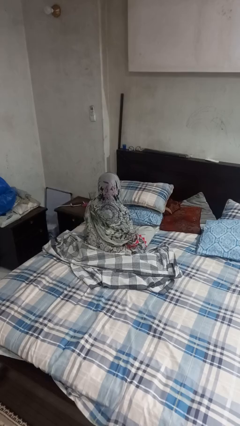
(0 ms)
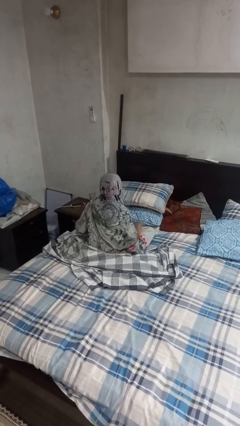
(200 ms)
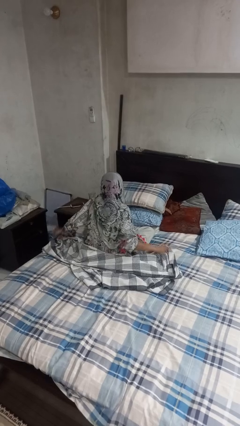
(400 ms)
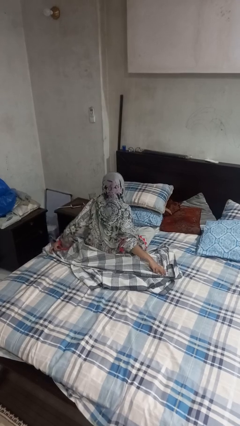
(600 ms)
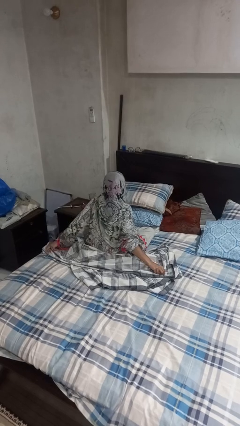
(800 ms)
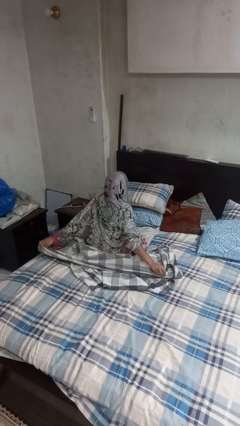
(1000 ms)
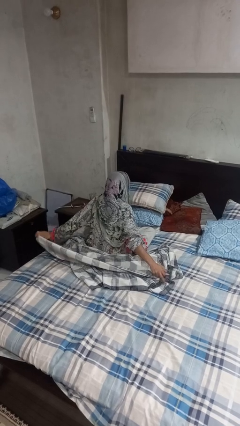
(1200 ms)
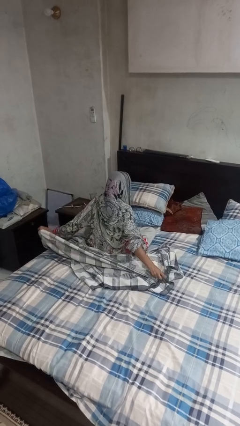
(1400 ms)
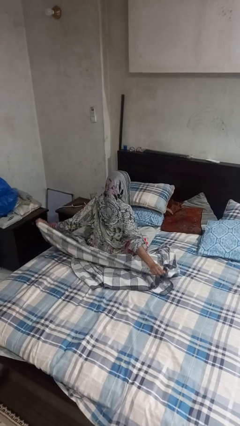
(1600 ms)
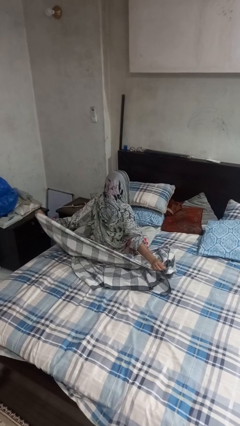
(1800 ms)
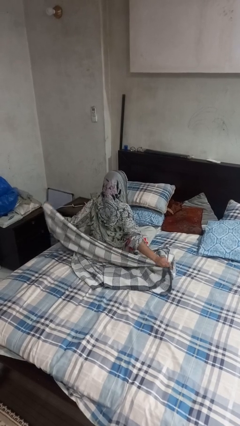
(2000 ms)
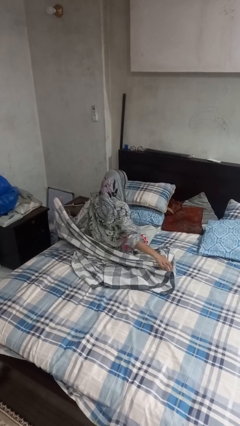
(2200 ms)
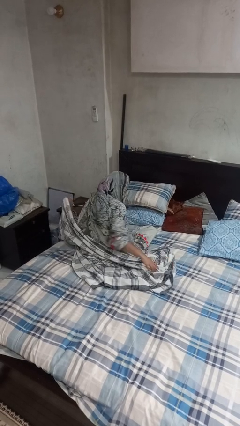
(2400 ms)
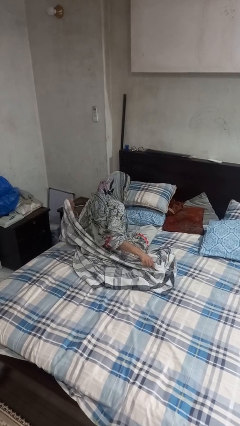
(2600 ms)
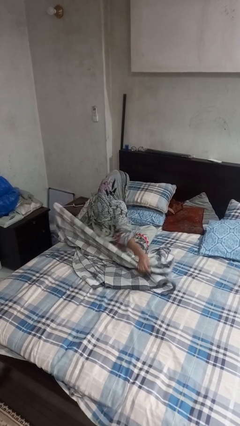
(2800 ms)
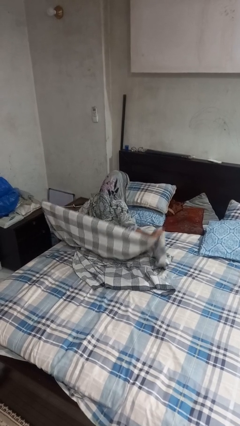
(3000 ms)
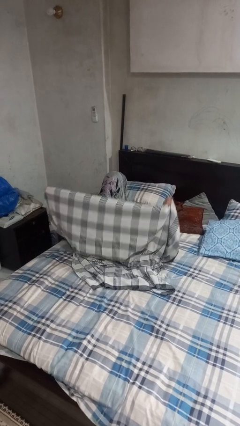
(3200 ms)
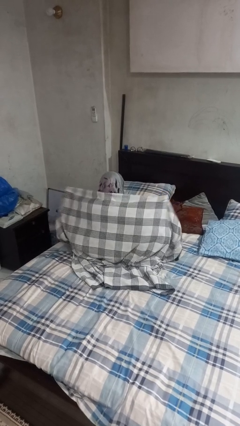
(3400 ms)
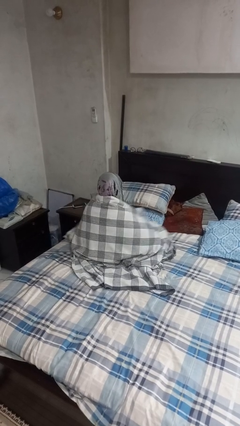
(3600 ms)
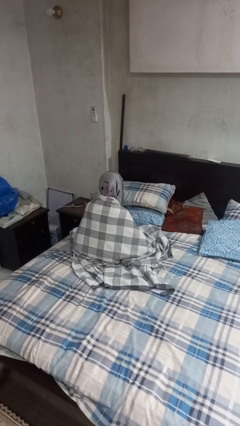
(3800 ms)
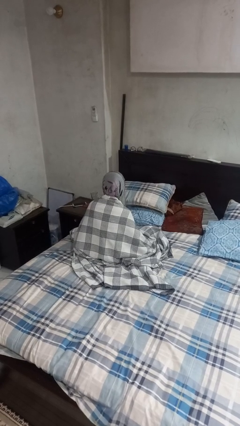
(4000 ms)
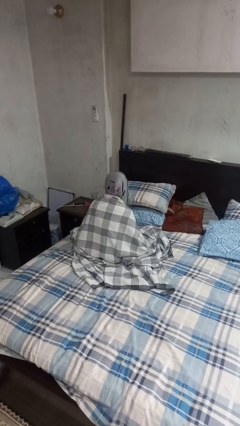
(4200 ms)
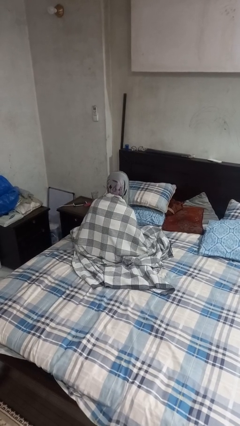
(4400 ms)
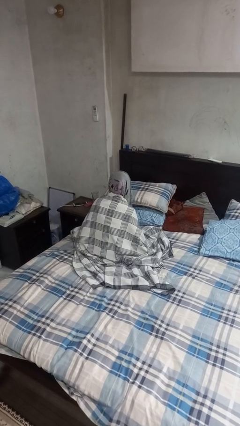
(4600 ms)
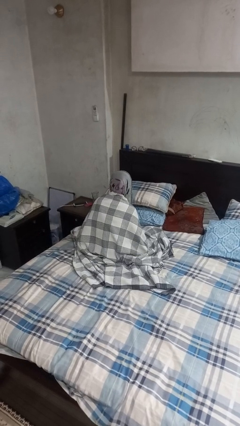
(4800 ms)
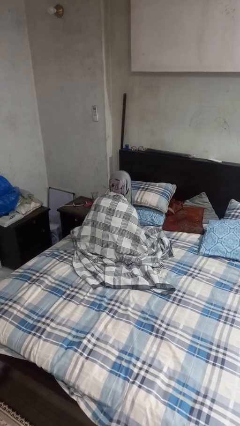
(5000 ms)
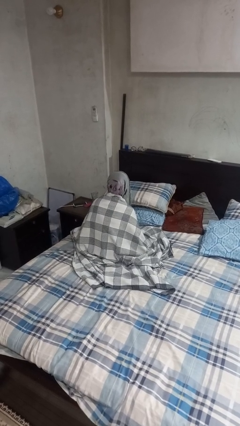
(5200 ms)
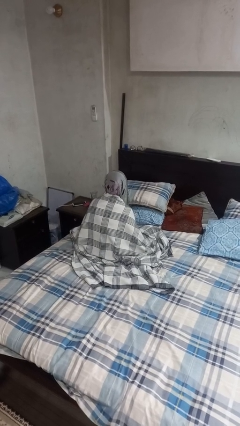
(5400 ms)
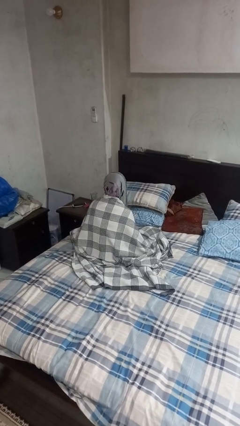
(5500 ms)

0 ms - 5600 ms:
person covers with blanket

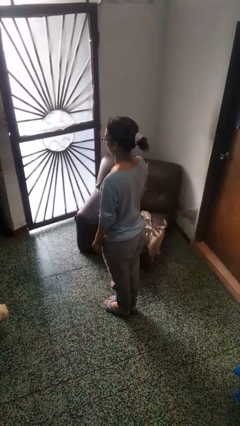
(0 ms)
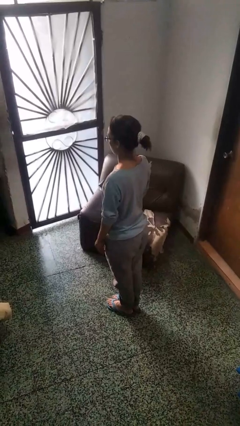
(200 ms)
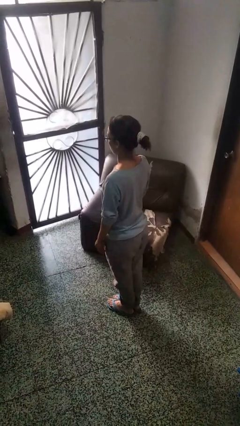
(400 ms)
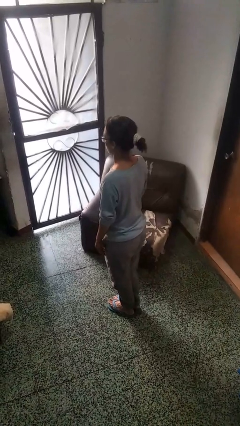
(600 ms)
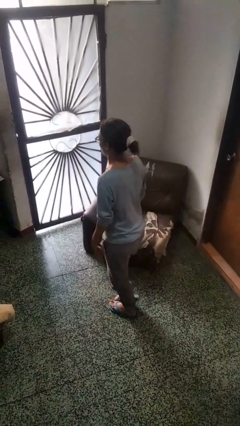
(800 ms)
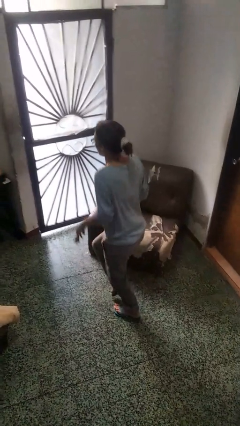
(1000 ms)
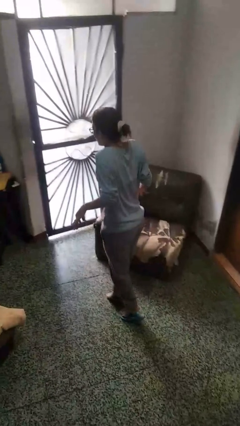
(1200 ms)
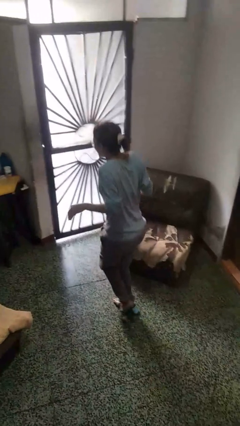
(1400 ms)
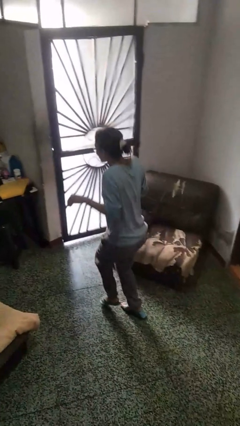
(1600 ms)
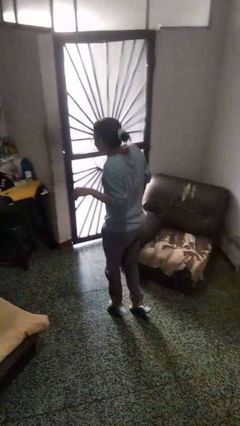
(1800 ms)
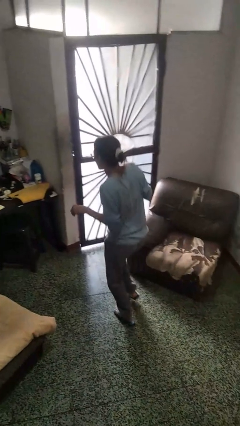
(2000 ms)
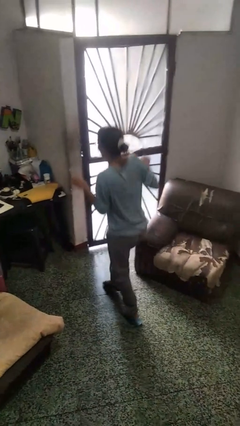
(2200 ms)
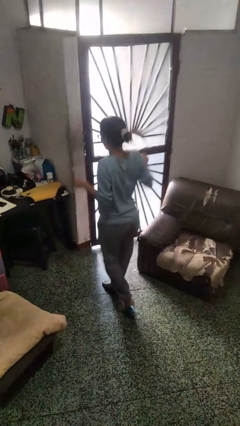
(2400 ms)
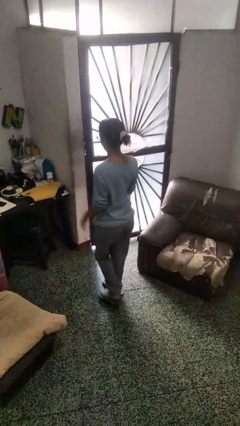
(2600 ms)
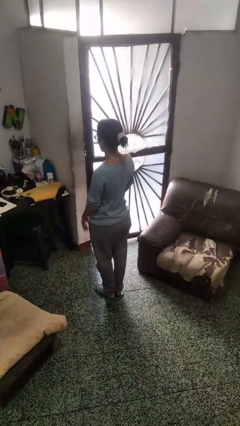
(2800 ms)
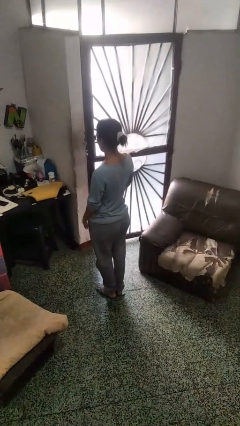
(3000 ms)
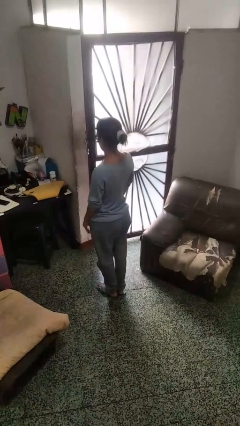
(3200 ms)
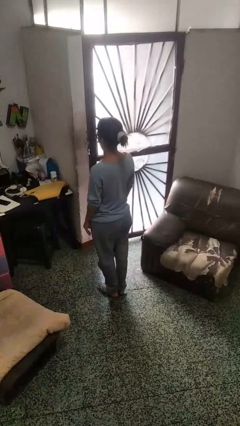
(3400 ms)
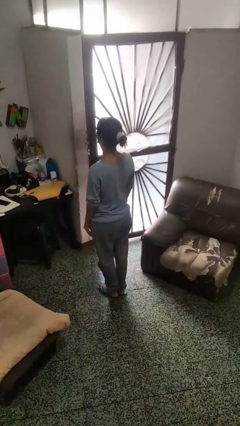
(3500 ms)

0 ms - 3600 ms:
person walks tiptoe

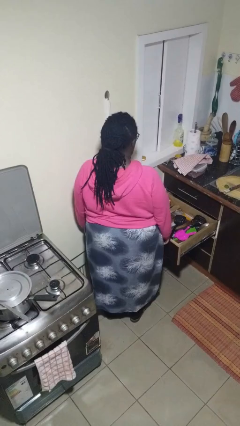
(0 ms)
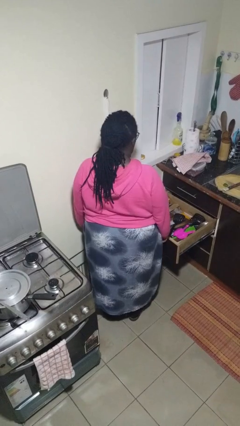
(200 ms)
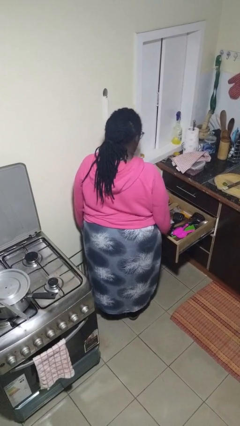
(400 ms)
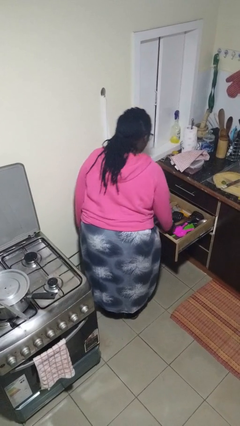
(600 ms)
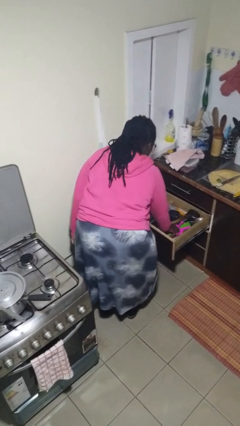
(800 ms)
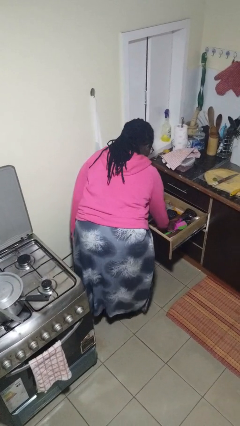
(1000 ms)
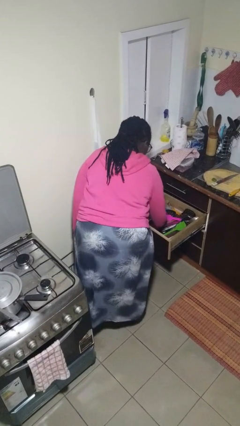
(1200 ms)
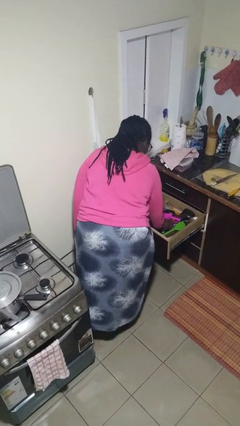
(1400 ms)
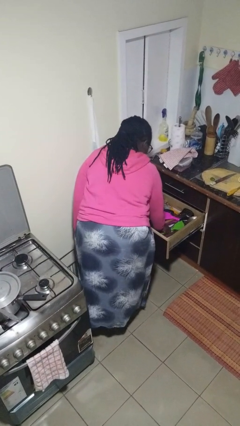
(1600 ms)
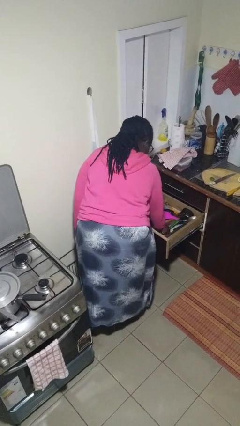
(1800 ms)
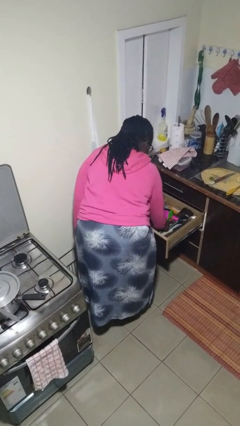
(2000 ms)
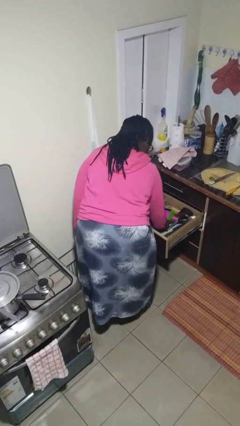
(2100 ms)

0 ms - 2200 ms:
person searches in kitchen drawer

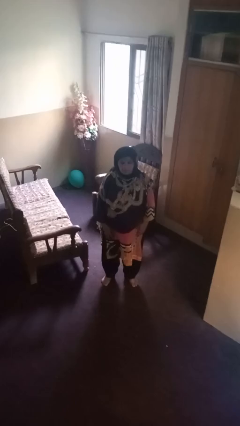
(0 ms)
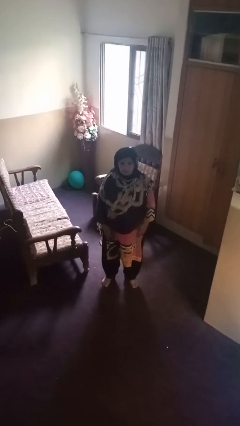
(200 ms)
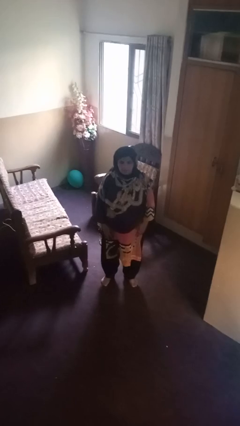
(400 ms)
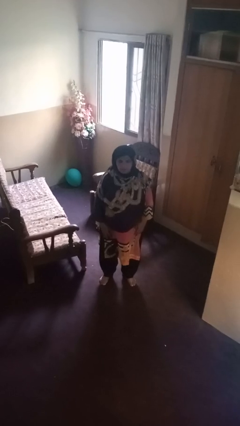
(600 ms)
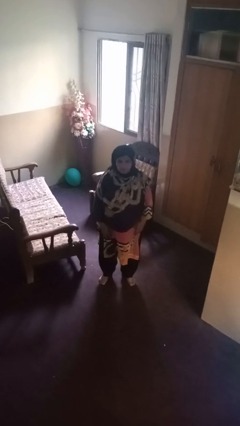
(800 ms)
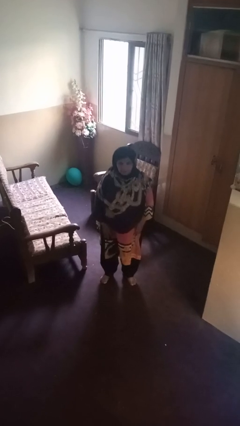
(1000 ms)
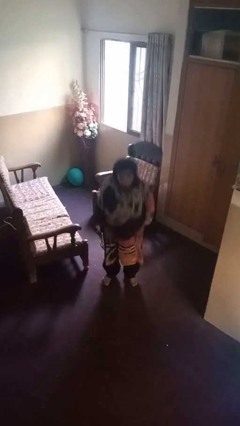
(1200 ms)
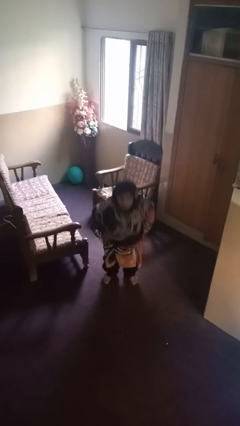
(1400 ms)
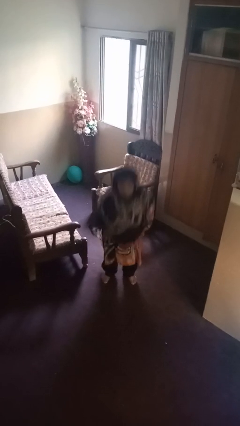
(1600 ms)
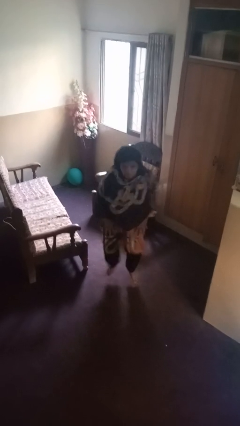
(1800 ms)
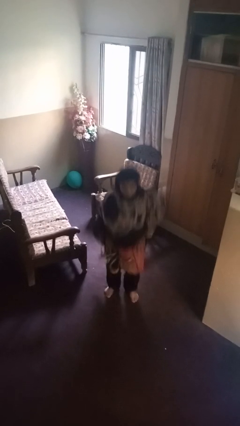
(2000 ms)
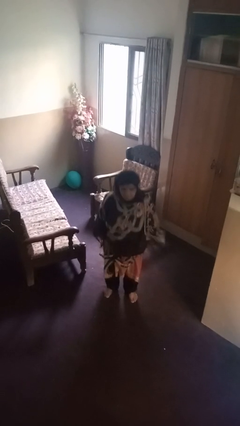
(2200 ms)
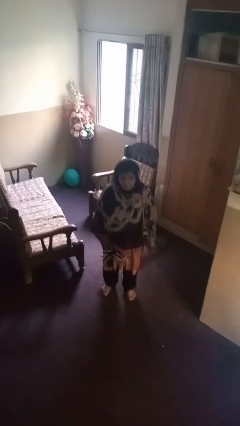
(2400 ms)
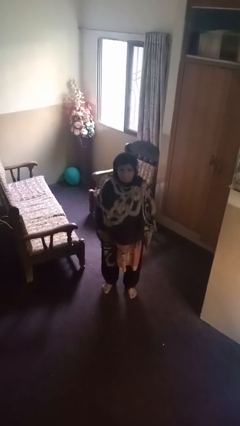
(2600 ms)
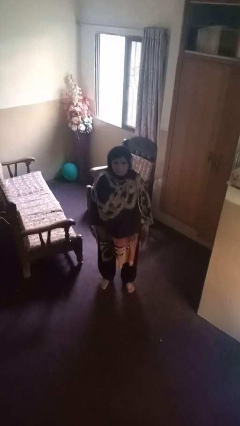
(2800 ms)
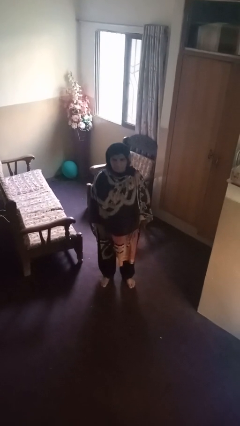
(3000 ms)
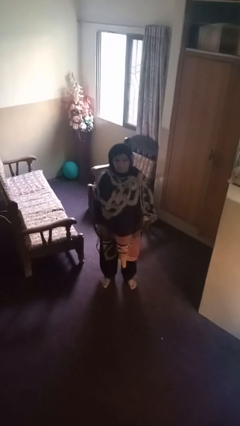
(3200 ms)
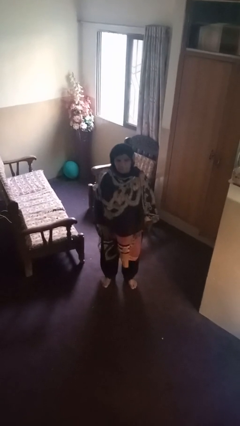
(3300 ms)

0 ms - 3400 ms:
person jumps

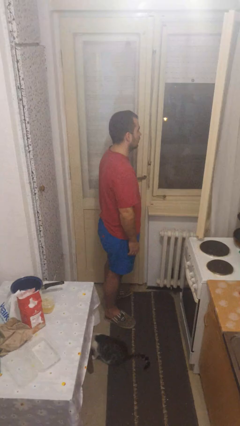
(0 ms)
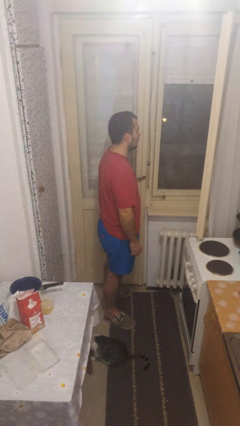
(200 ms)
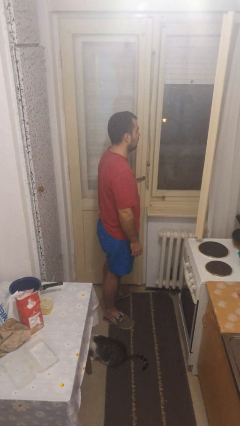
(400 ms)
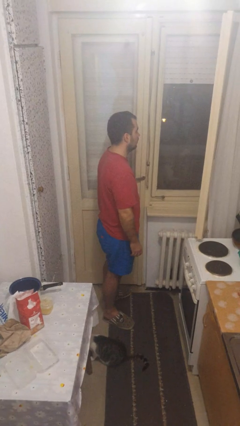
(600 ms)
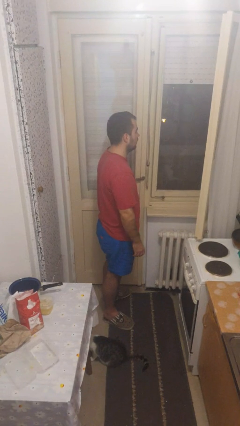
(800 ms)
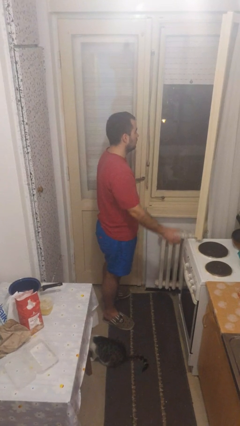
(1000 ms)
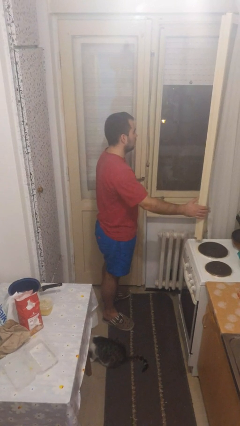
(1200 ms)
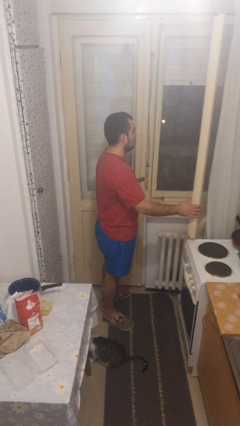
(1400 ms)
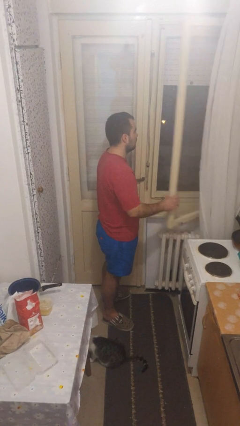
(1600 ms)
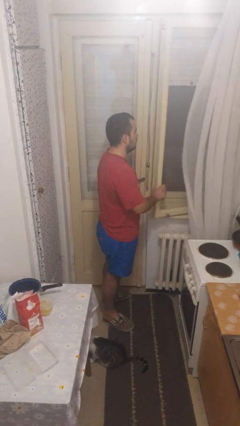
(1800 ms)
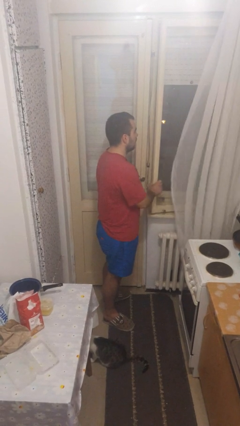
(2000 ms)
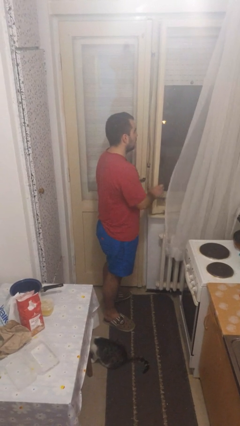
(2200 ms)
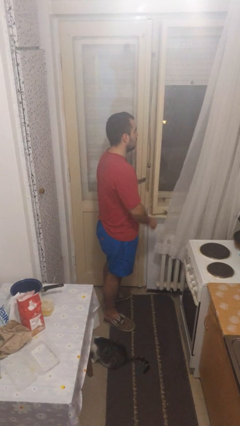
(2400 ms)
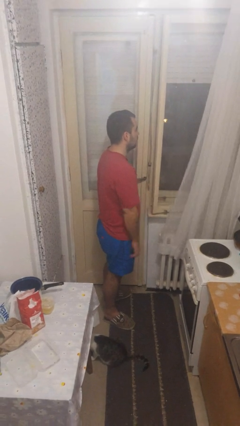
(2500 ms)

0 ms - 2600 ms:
person closes home window

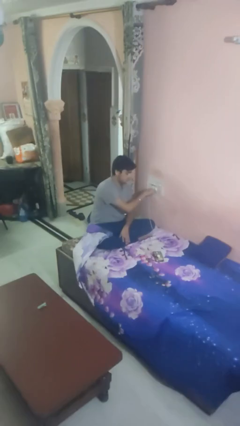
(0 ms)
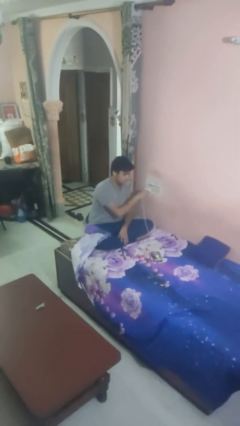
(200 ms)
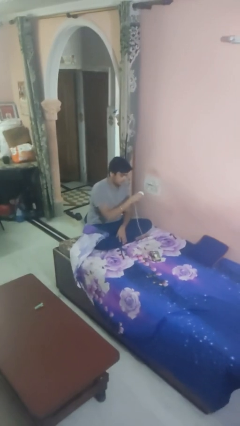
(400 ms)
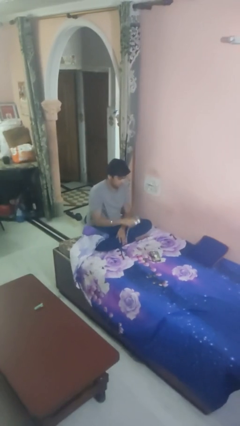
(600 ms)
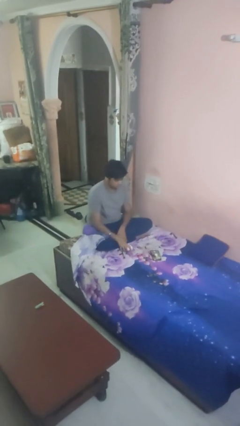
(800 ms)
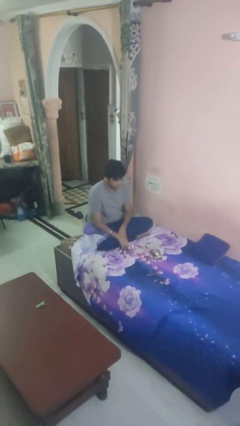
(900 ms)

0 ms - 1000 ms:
person unplugs from electrical socket
